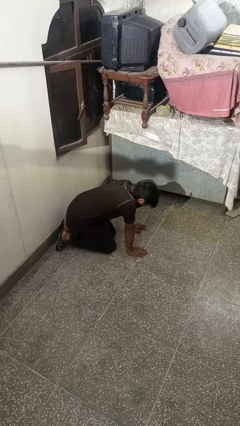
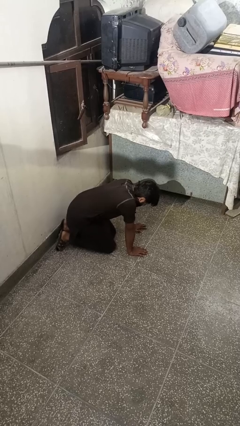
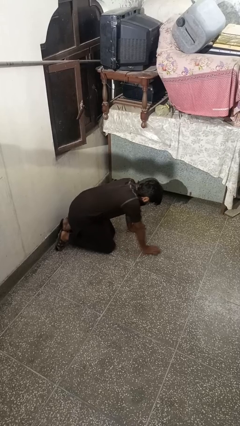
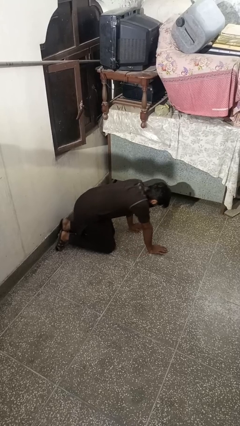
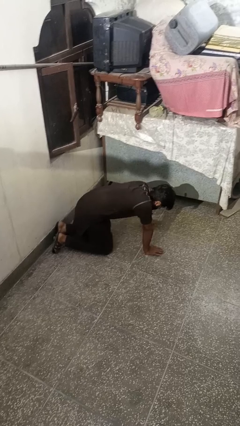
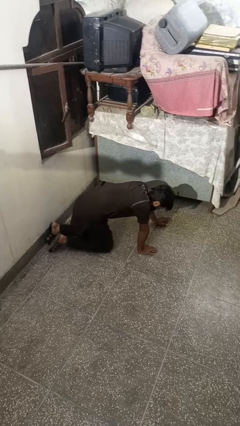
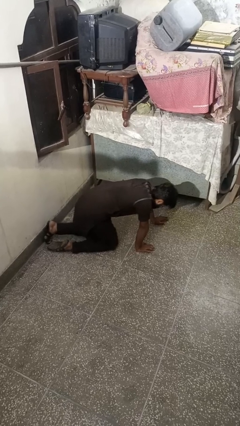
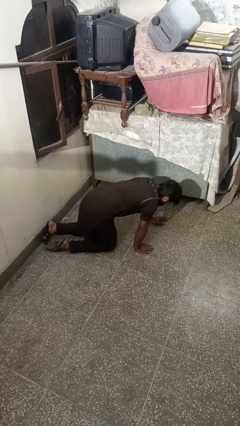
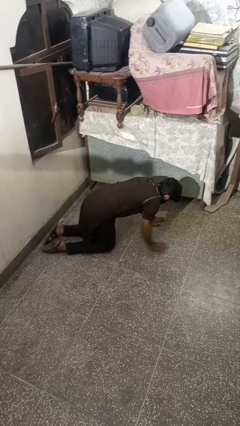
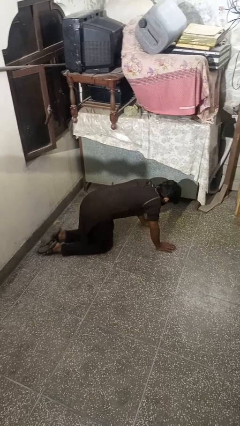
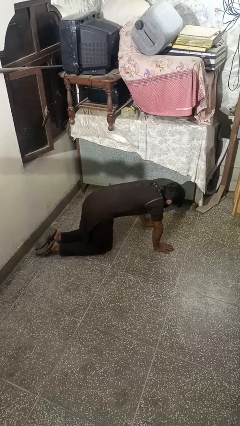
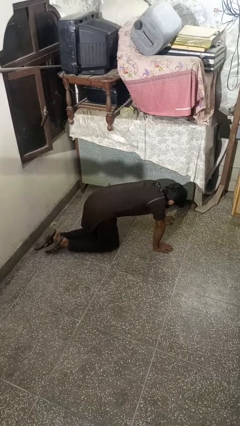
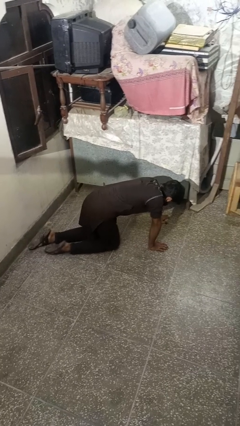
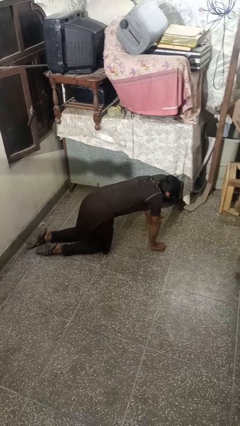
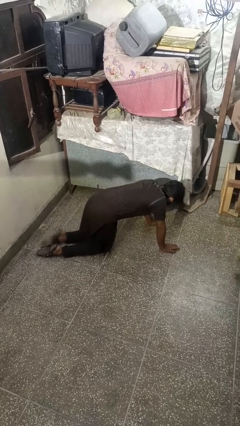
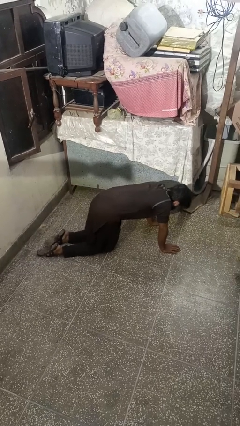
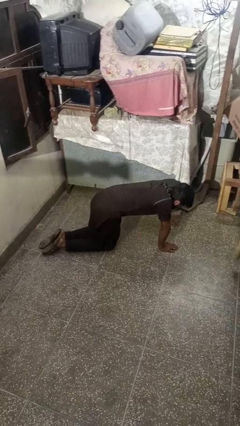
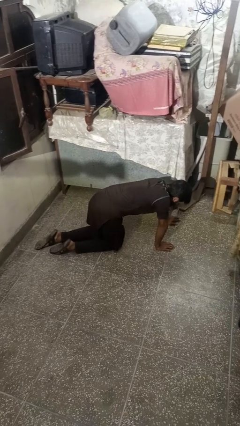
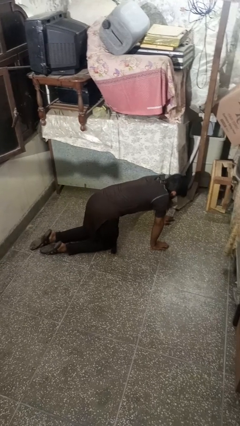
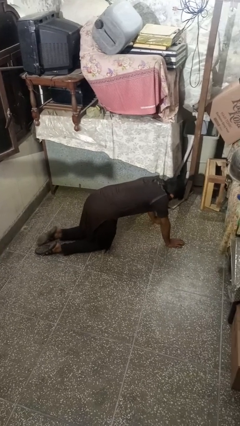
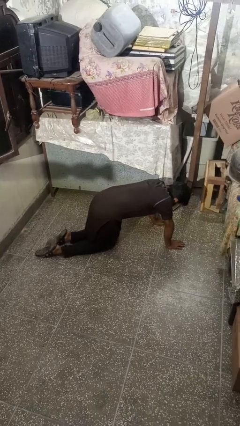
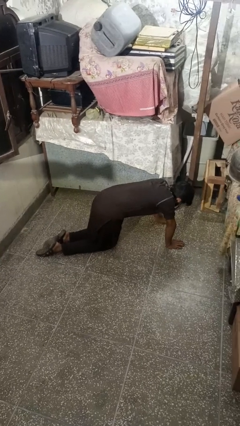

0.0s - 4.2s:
person crawls

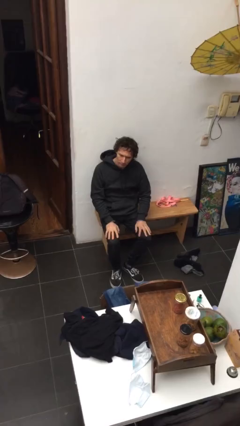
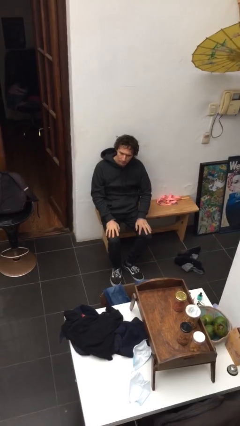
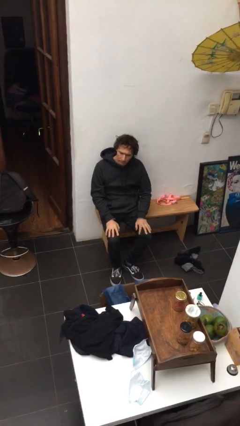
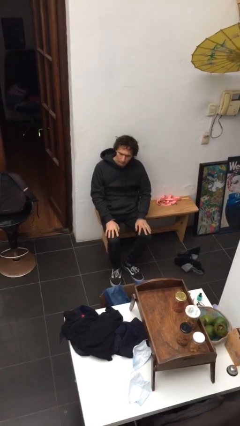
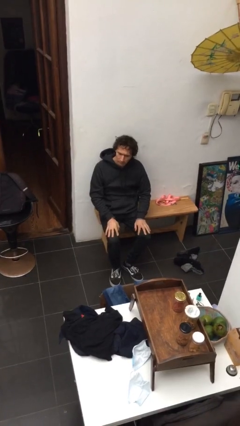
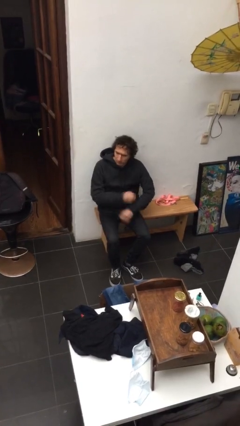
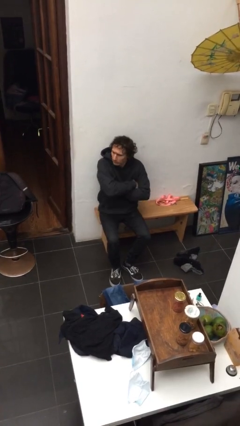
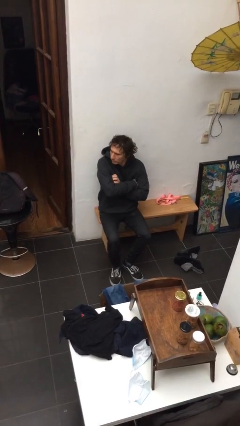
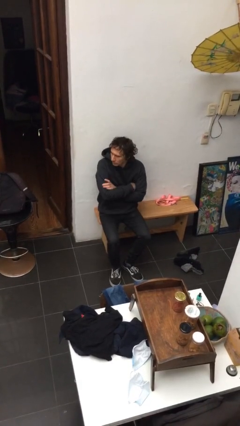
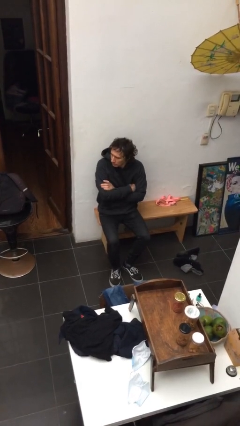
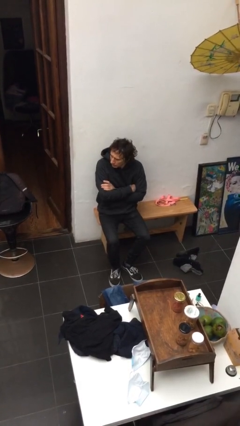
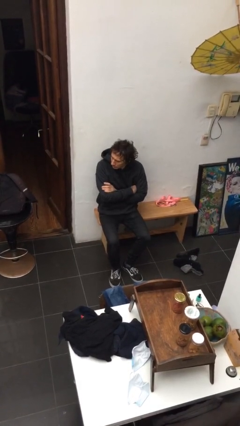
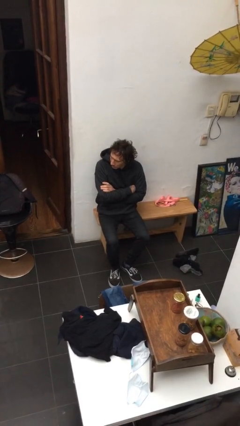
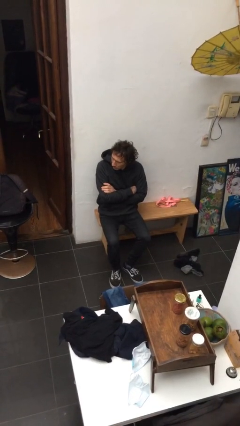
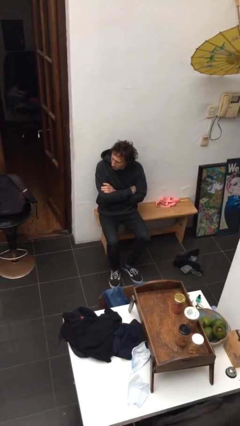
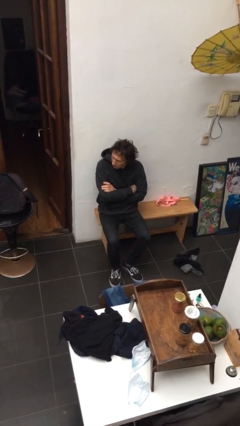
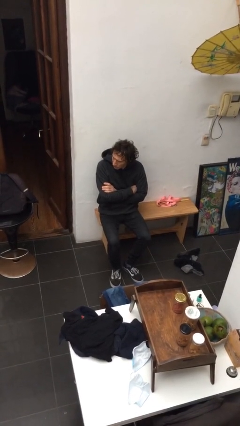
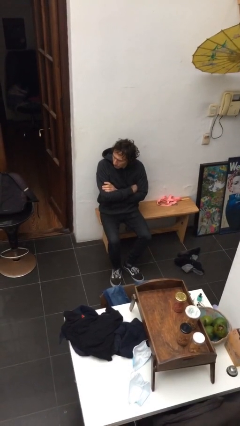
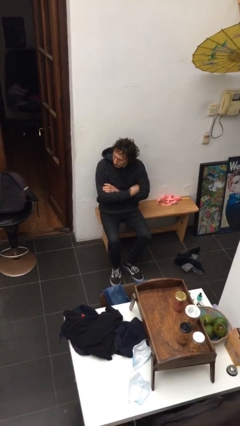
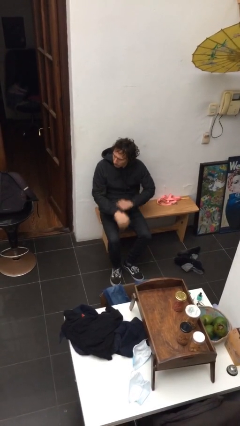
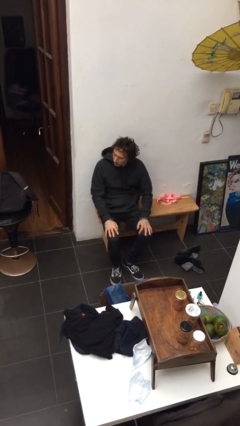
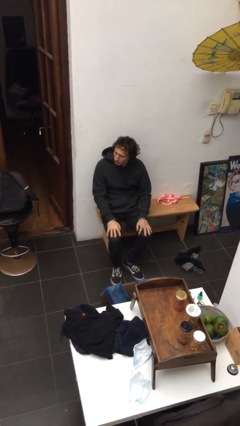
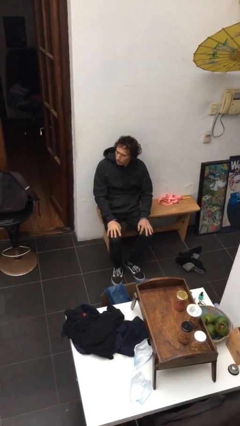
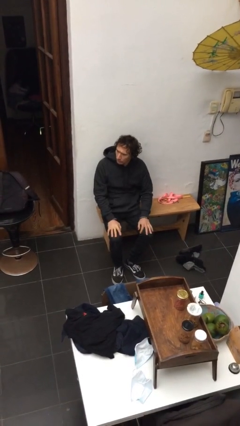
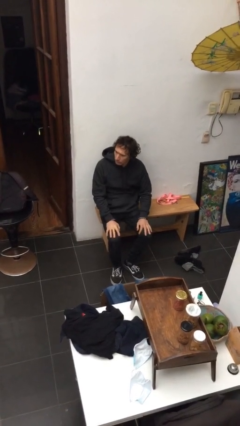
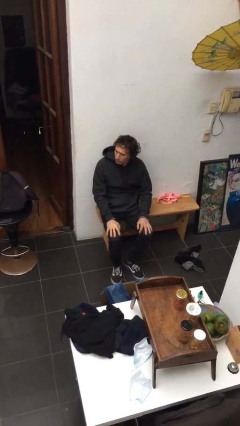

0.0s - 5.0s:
person crosses arms

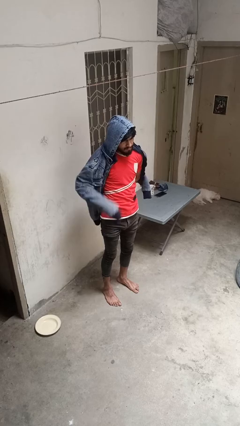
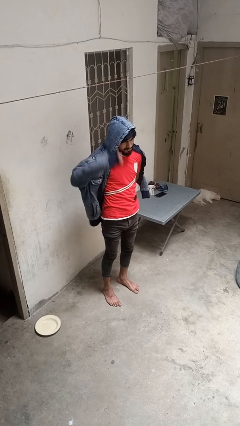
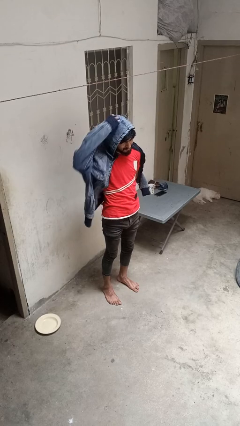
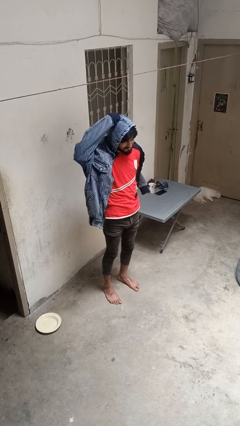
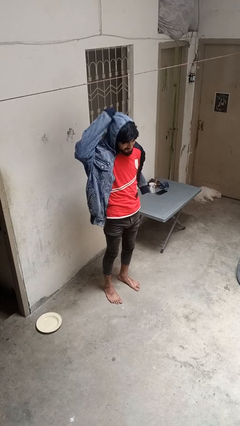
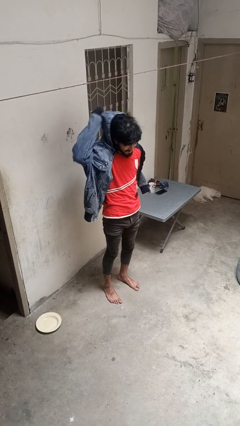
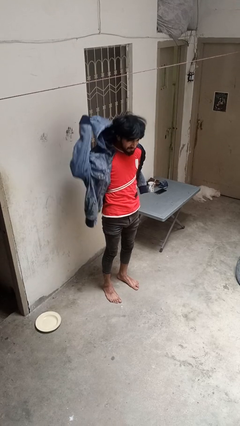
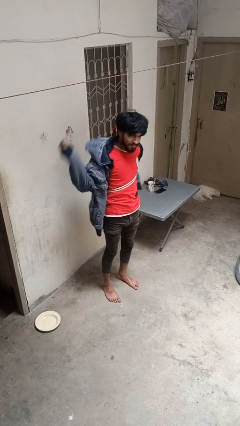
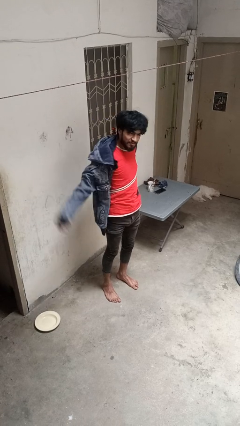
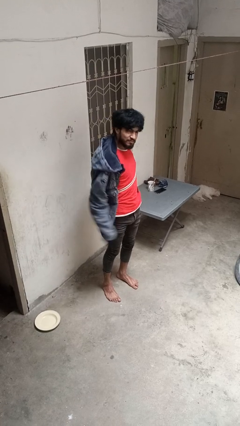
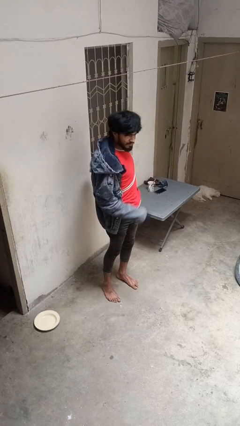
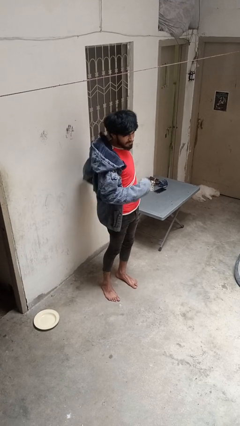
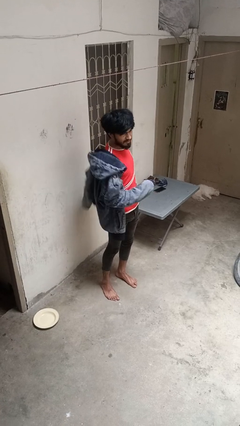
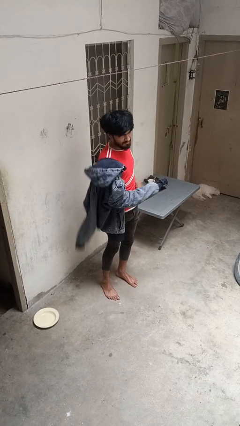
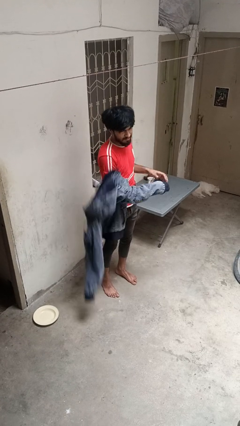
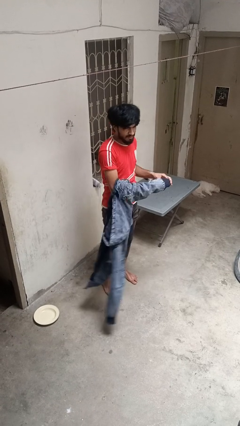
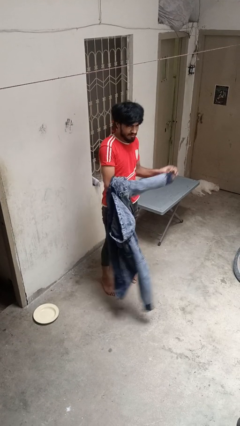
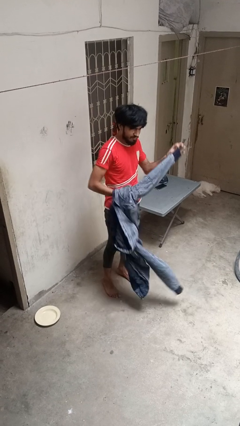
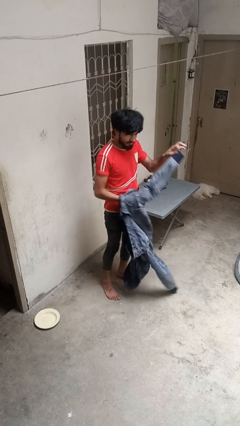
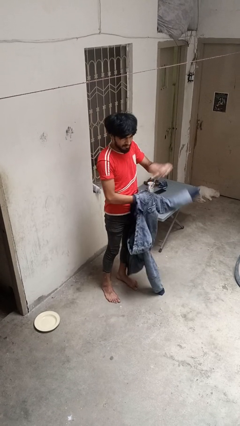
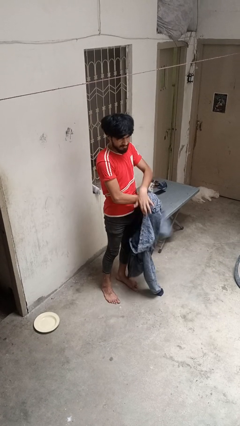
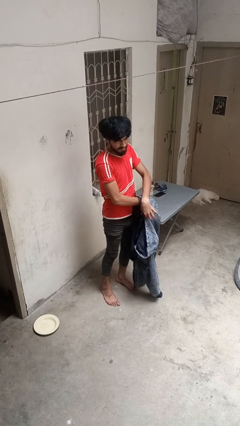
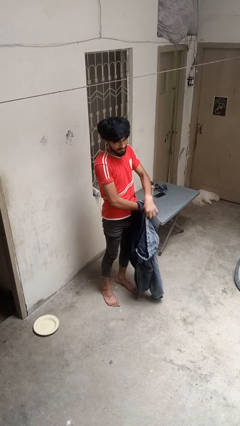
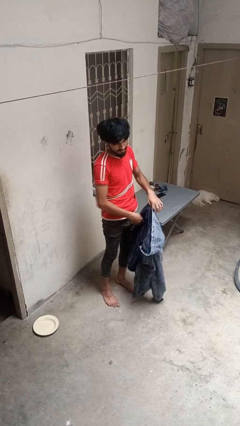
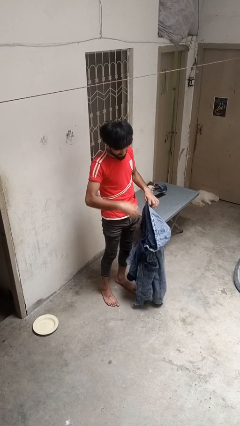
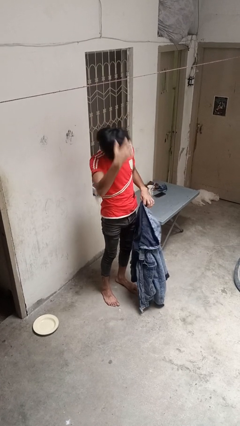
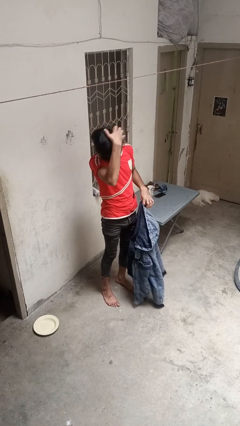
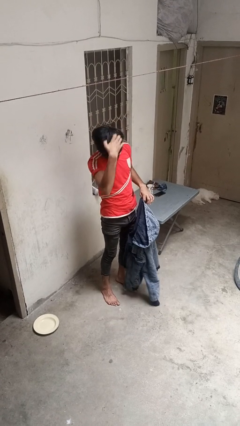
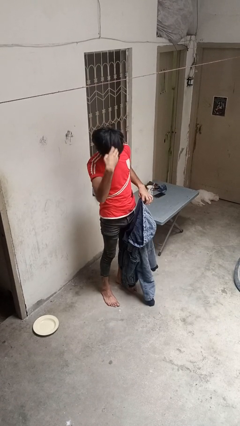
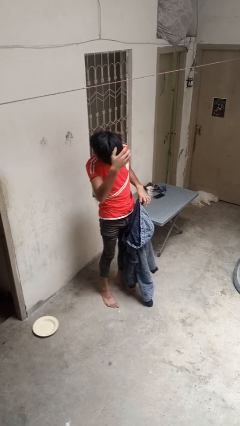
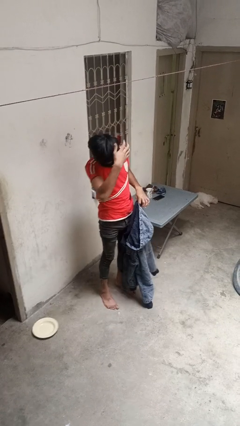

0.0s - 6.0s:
person takes off hoodie

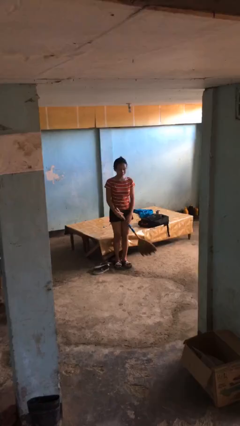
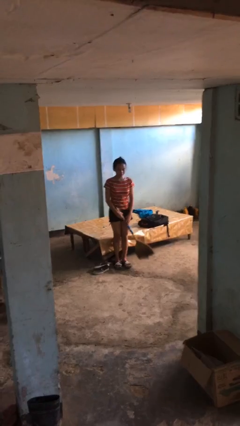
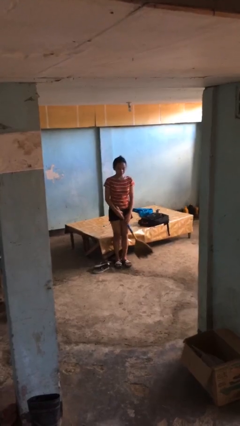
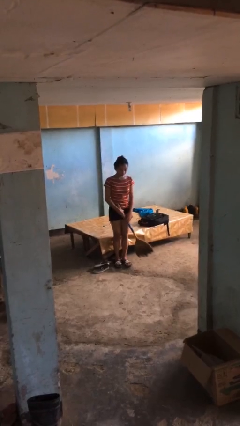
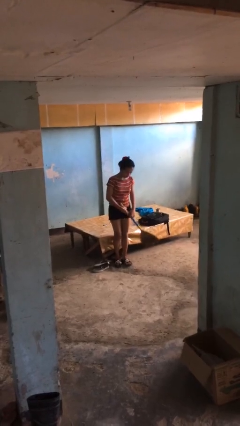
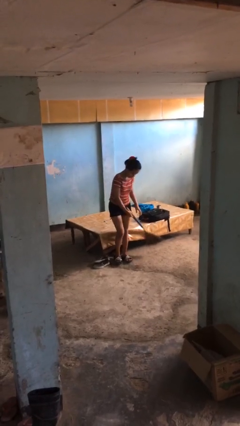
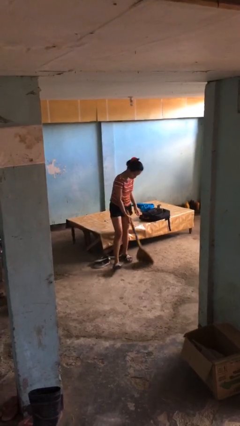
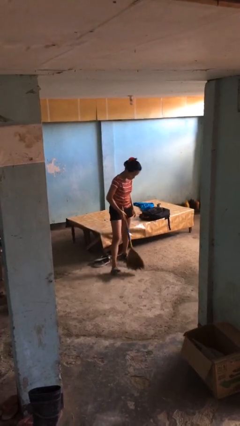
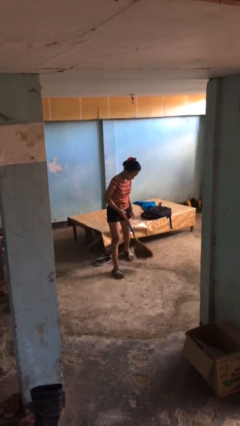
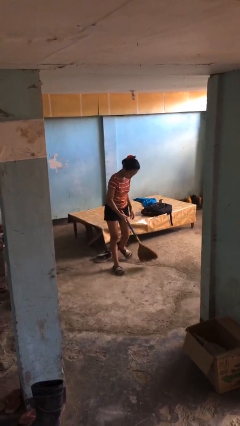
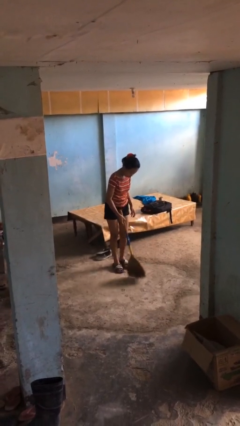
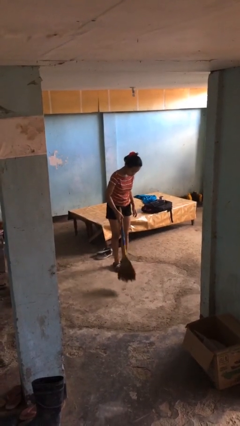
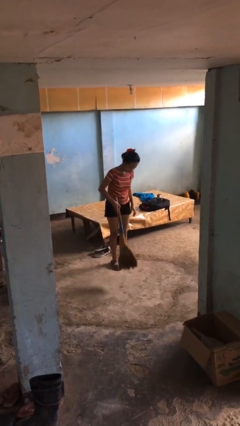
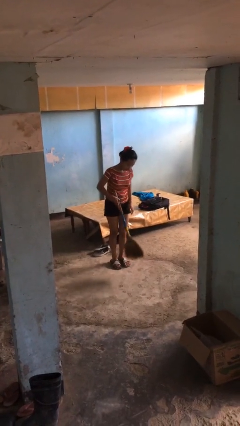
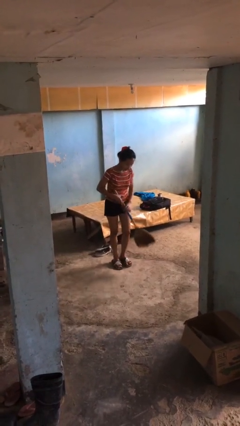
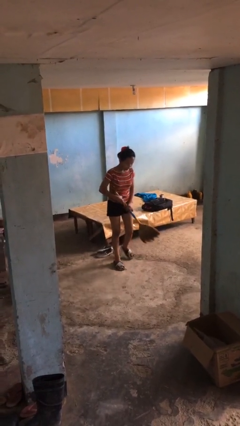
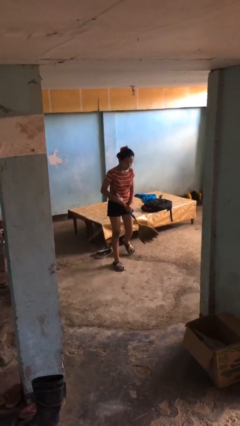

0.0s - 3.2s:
person sweeps floor
